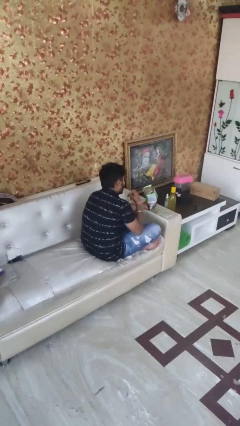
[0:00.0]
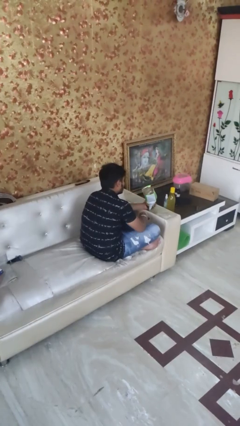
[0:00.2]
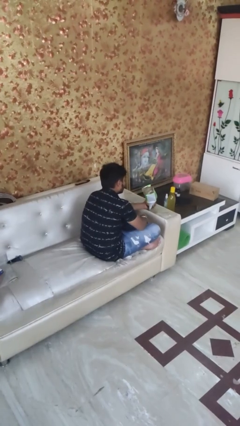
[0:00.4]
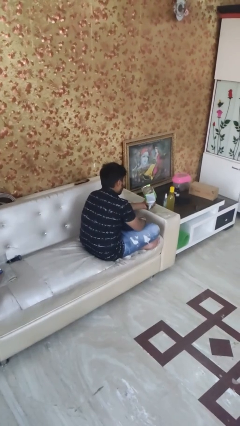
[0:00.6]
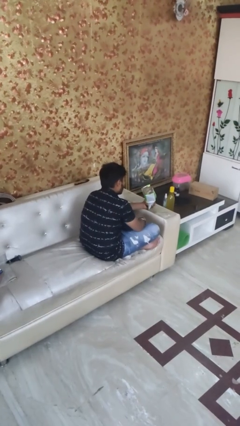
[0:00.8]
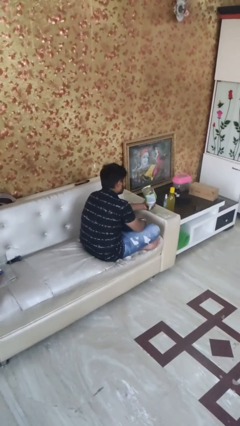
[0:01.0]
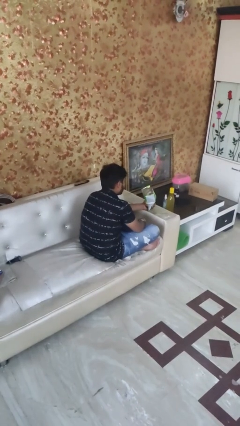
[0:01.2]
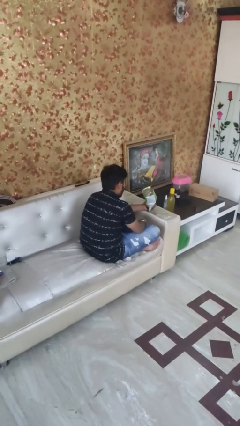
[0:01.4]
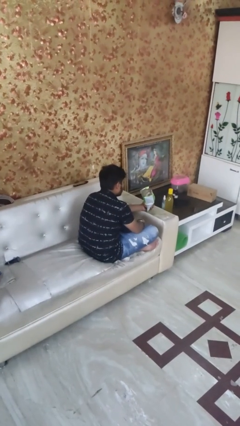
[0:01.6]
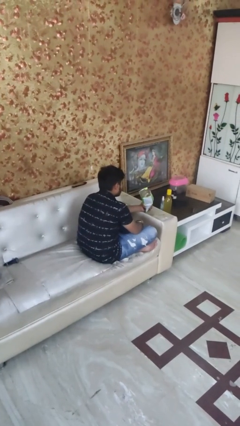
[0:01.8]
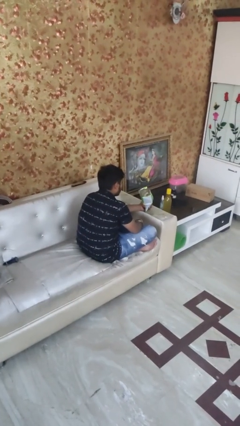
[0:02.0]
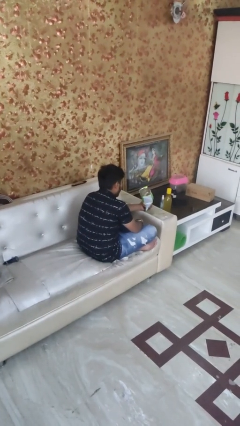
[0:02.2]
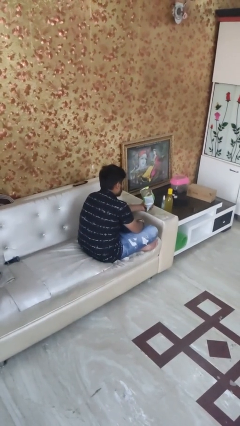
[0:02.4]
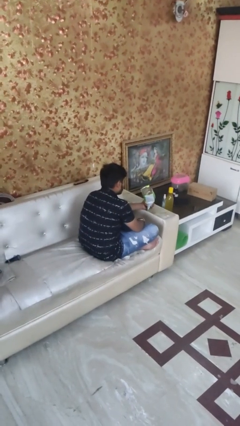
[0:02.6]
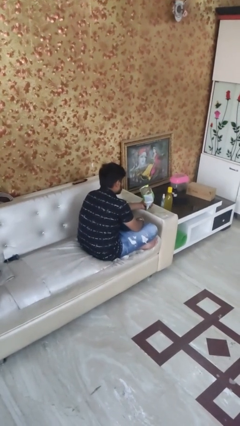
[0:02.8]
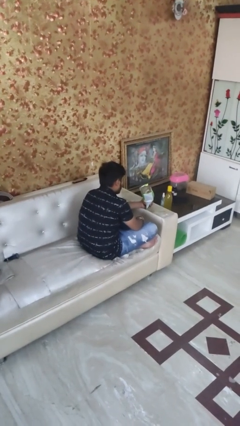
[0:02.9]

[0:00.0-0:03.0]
person eats snack from bag

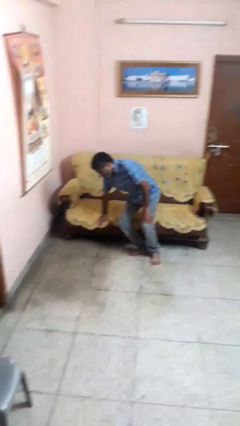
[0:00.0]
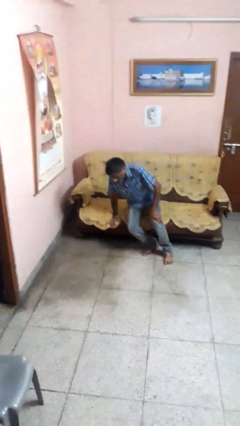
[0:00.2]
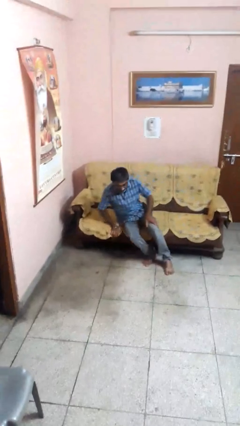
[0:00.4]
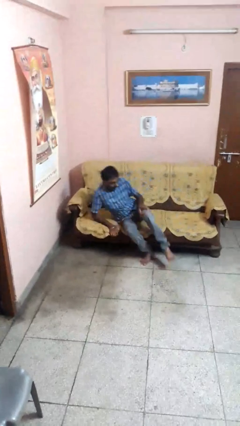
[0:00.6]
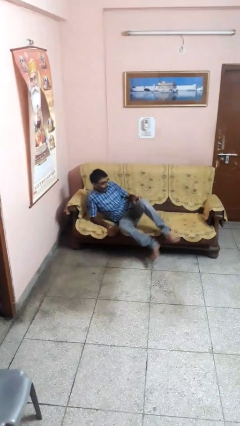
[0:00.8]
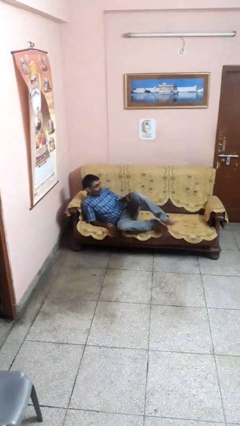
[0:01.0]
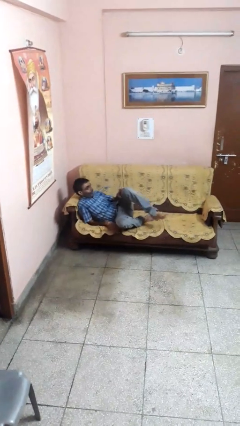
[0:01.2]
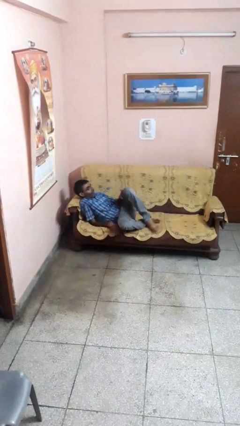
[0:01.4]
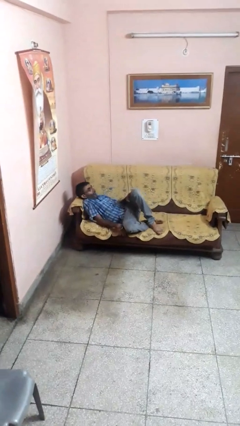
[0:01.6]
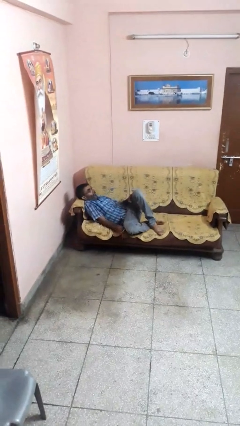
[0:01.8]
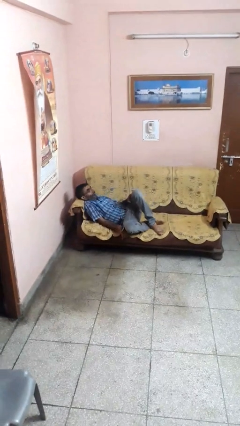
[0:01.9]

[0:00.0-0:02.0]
person lies down on couch

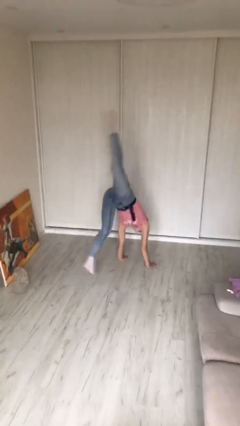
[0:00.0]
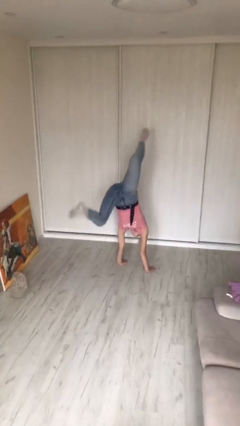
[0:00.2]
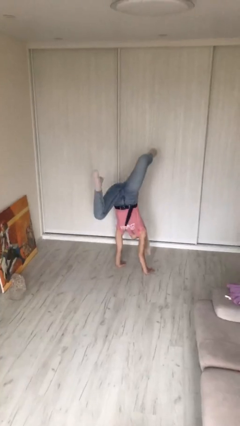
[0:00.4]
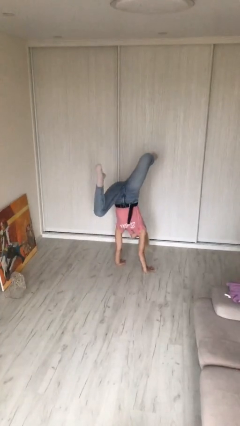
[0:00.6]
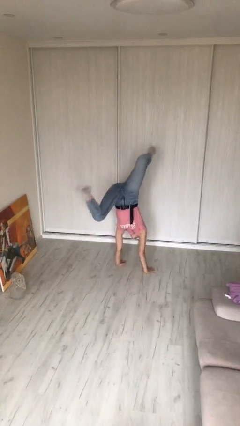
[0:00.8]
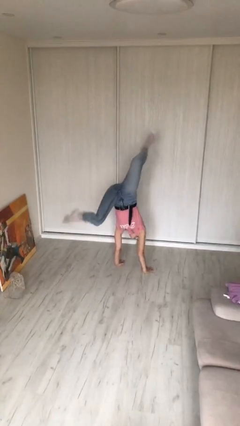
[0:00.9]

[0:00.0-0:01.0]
person handstand

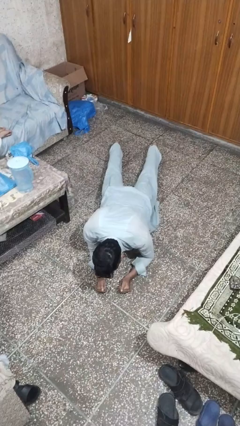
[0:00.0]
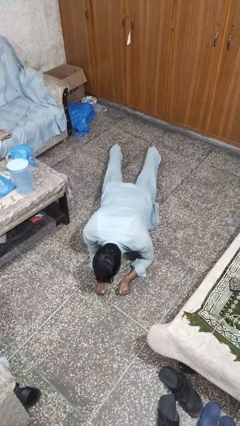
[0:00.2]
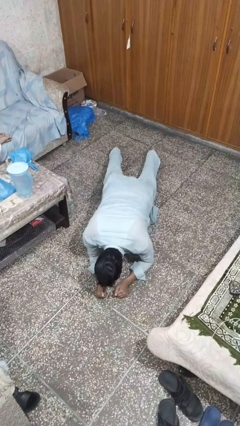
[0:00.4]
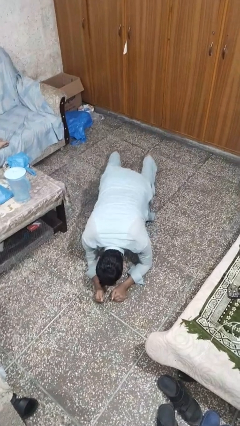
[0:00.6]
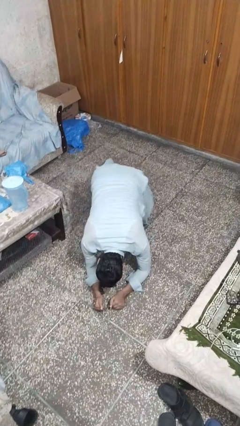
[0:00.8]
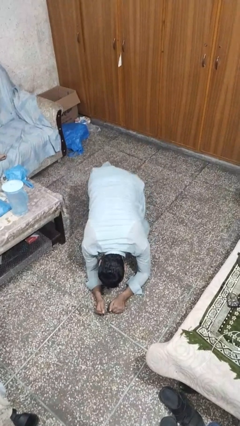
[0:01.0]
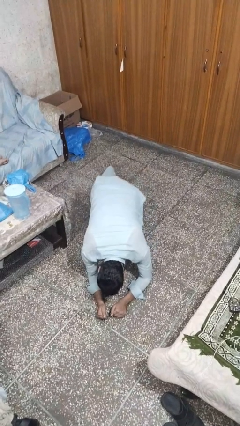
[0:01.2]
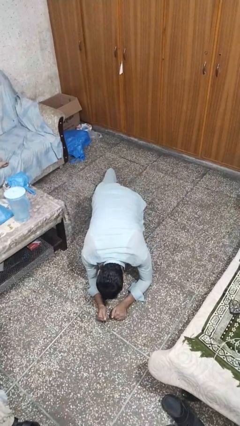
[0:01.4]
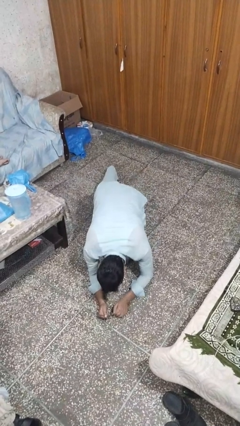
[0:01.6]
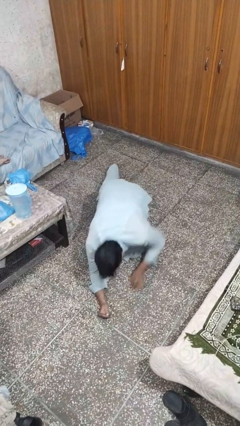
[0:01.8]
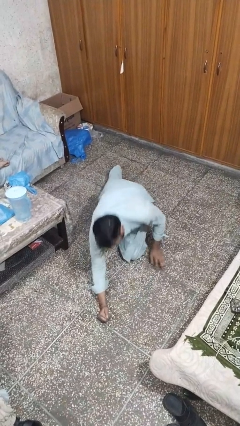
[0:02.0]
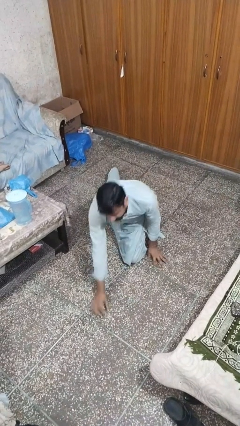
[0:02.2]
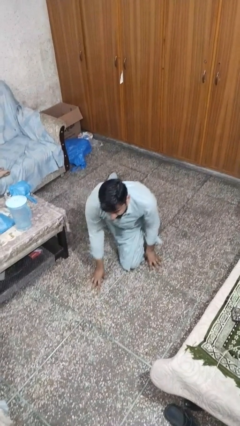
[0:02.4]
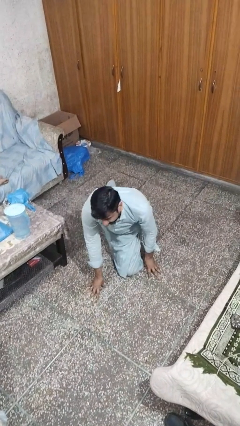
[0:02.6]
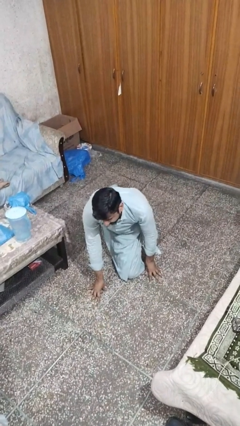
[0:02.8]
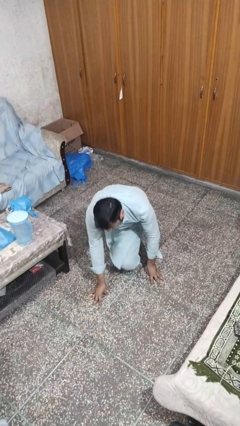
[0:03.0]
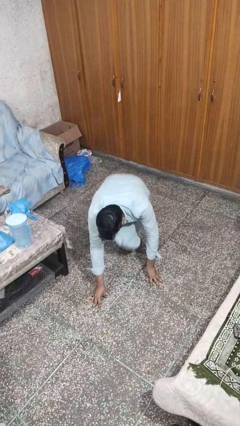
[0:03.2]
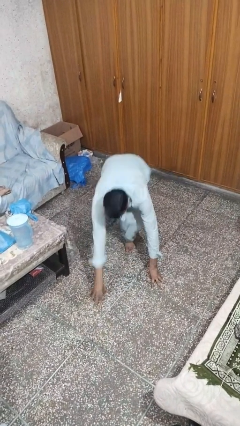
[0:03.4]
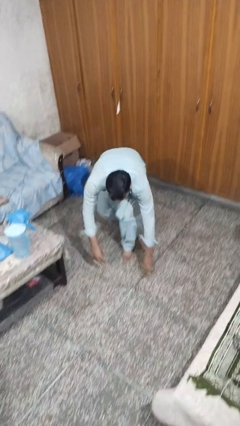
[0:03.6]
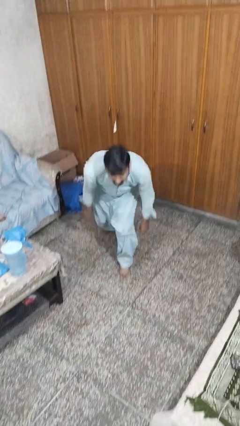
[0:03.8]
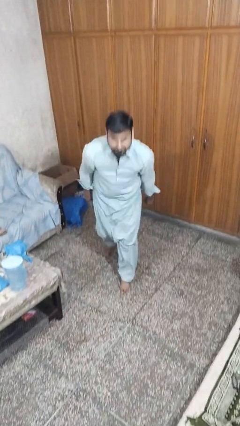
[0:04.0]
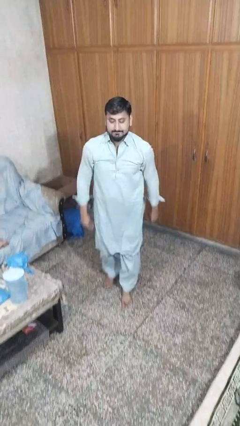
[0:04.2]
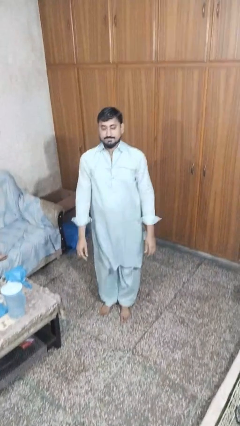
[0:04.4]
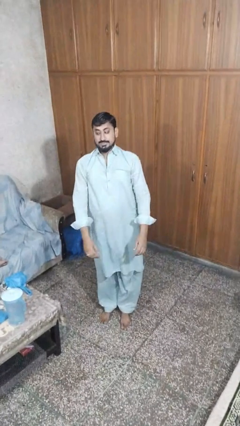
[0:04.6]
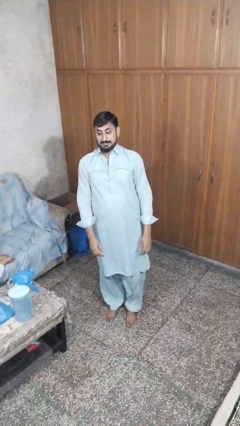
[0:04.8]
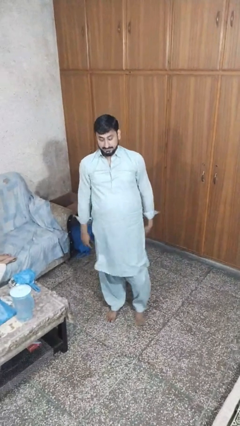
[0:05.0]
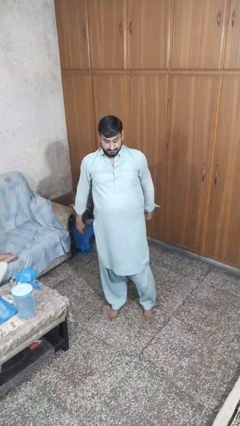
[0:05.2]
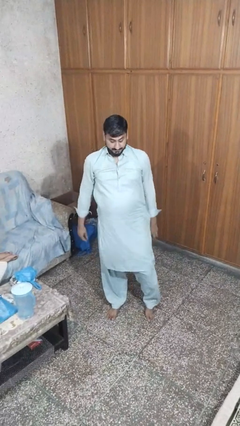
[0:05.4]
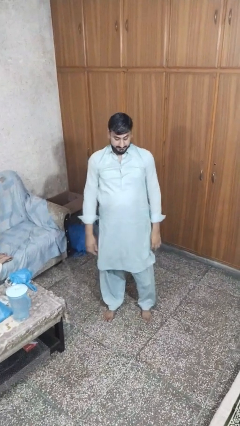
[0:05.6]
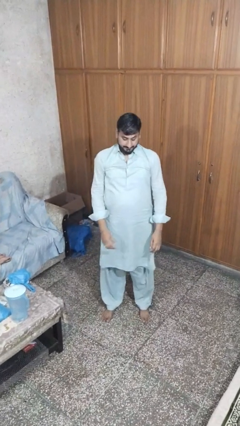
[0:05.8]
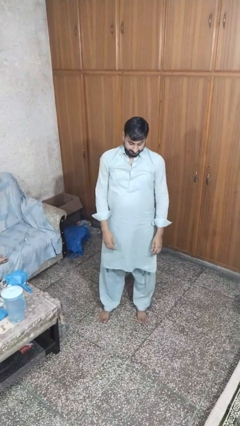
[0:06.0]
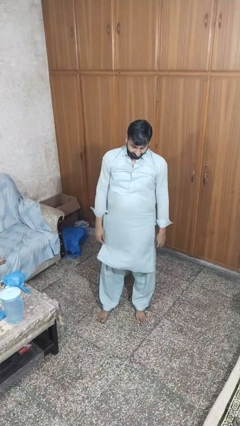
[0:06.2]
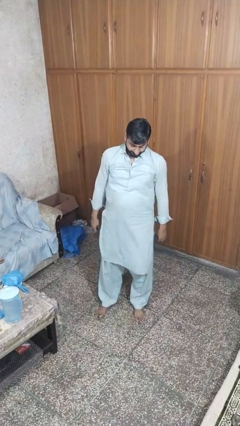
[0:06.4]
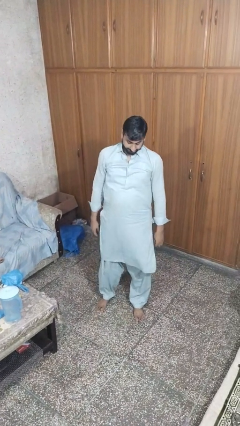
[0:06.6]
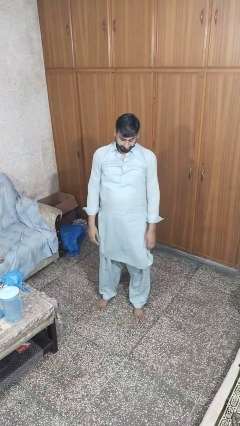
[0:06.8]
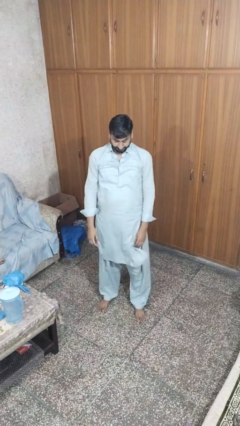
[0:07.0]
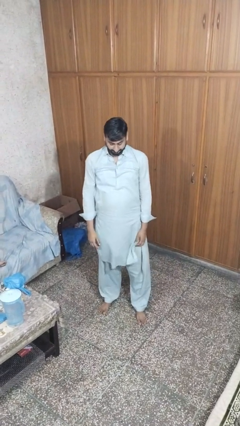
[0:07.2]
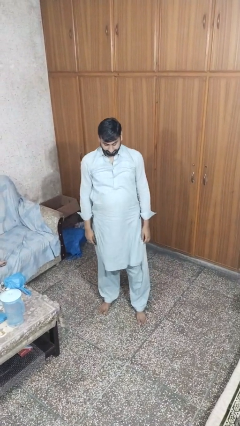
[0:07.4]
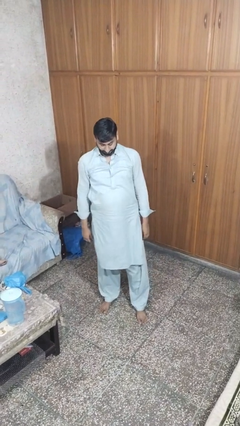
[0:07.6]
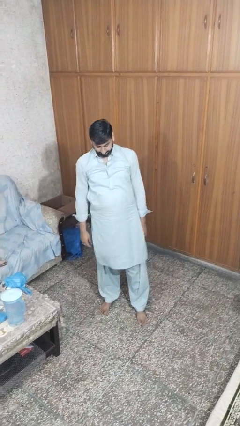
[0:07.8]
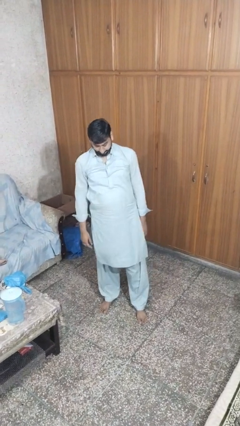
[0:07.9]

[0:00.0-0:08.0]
person stands up from floor

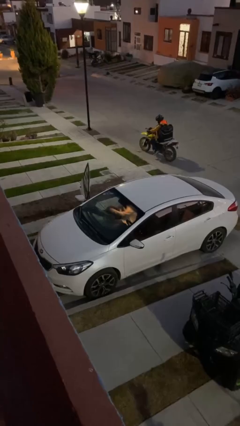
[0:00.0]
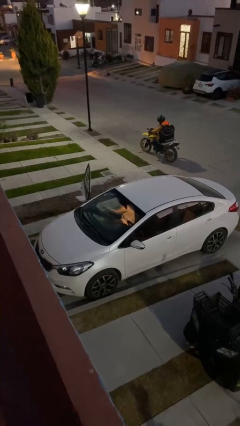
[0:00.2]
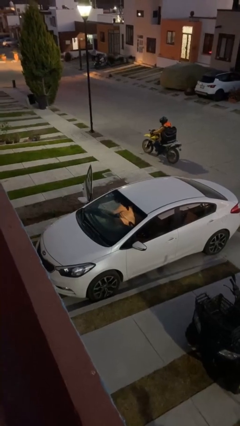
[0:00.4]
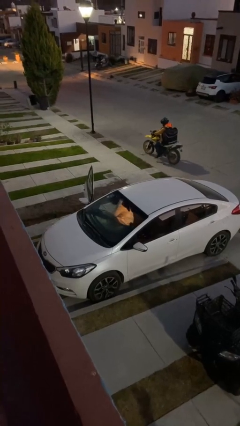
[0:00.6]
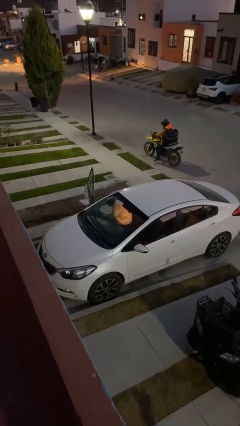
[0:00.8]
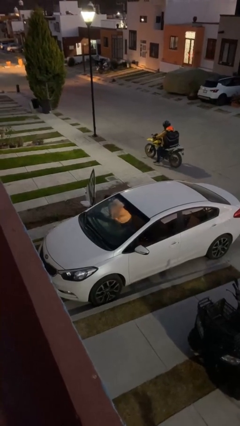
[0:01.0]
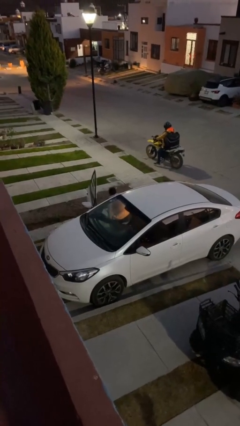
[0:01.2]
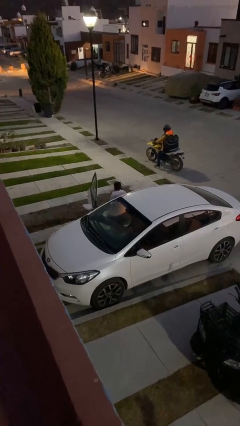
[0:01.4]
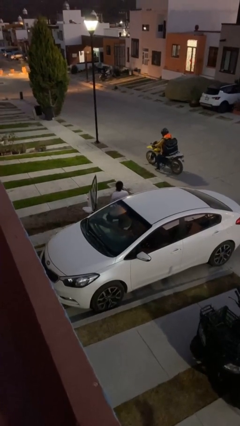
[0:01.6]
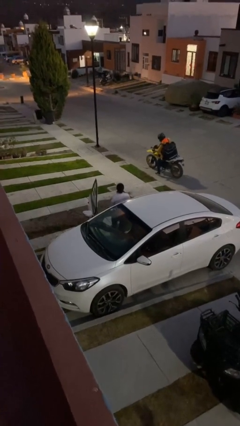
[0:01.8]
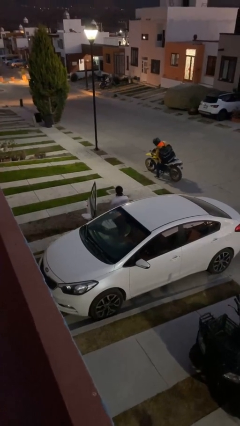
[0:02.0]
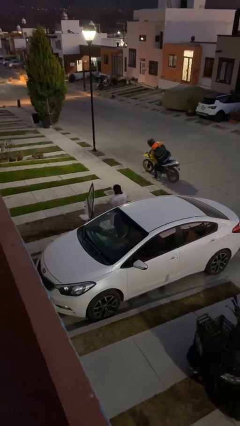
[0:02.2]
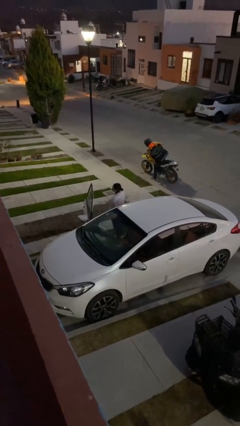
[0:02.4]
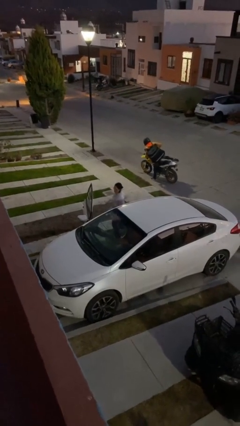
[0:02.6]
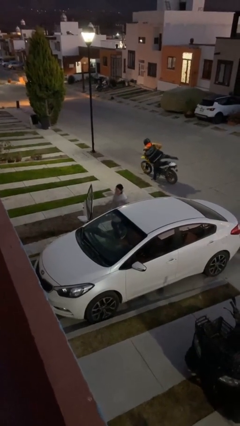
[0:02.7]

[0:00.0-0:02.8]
person exits car

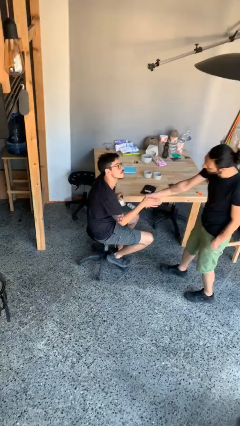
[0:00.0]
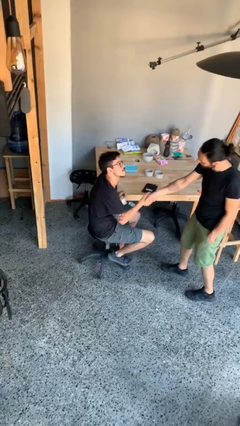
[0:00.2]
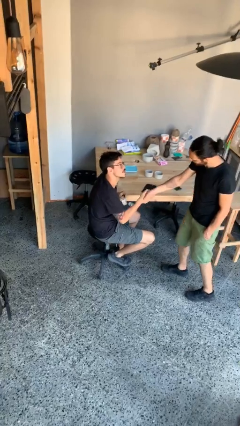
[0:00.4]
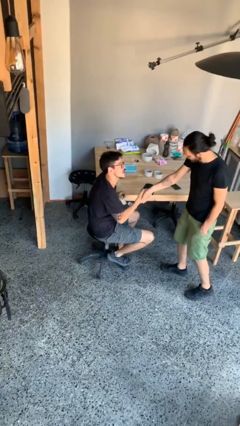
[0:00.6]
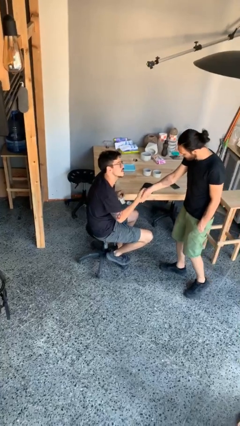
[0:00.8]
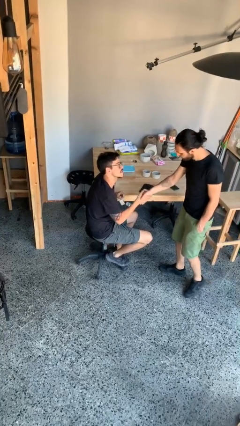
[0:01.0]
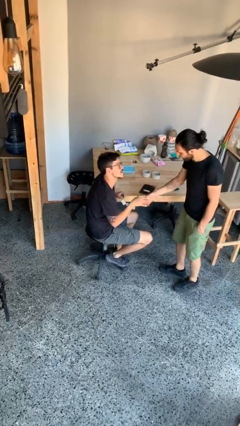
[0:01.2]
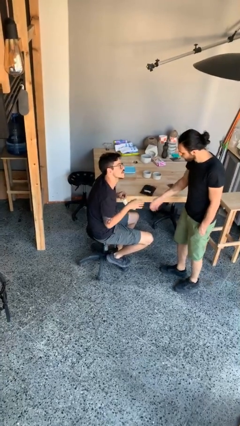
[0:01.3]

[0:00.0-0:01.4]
person shakes hand
